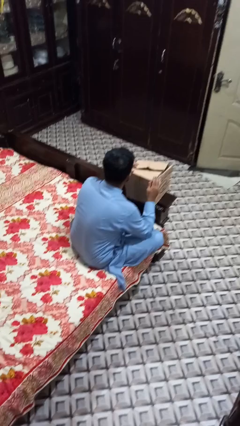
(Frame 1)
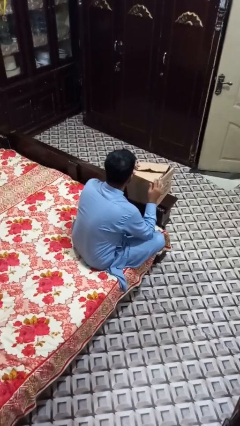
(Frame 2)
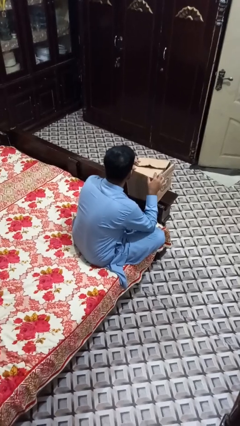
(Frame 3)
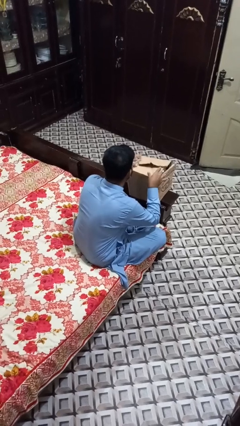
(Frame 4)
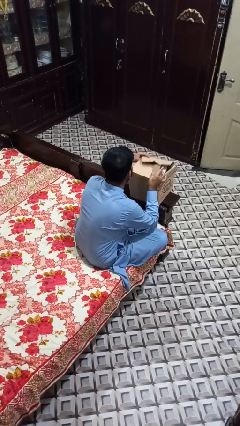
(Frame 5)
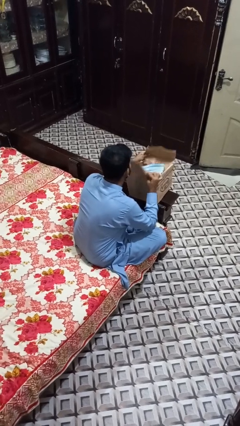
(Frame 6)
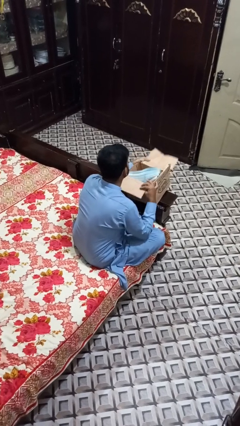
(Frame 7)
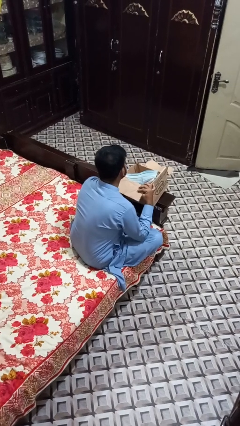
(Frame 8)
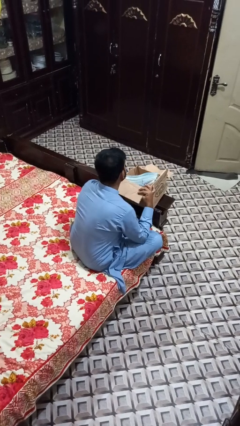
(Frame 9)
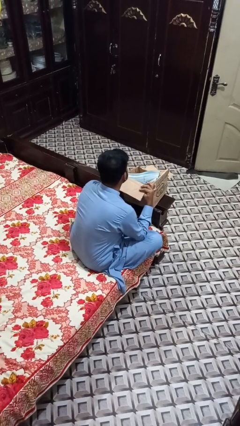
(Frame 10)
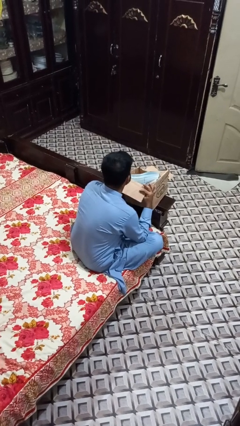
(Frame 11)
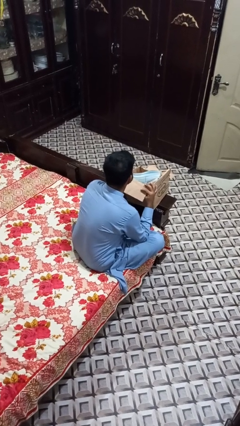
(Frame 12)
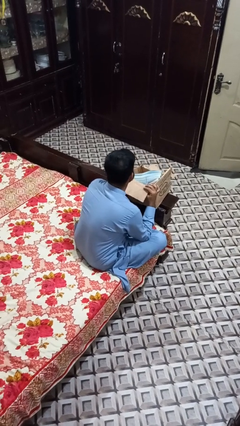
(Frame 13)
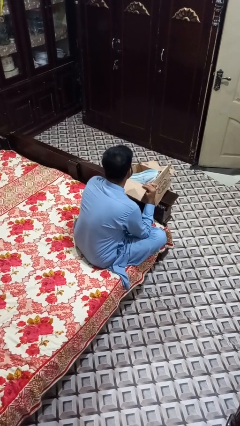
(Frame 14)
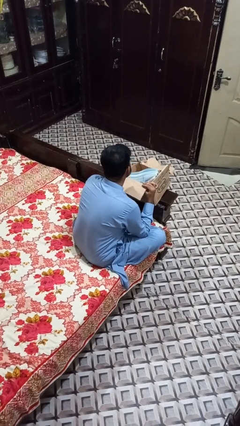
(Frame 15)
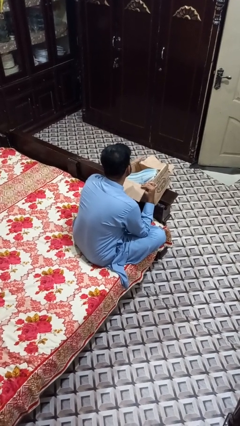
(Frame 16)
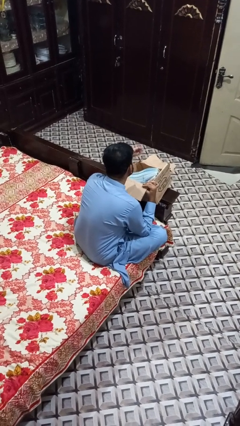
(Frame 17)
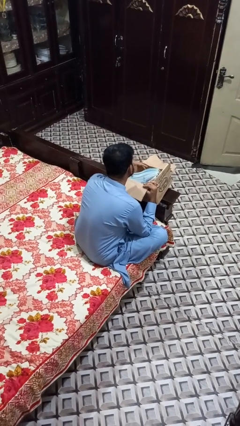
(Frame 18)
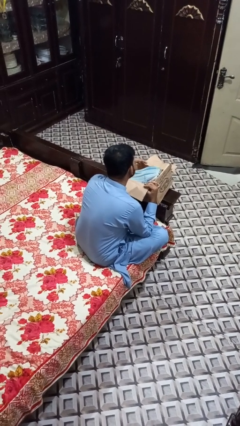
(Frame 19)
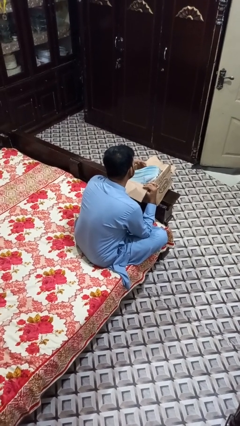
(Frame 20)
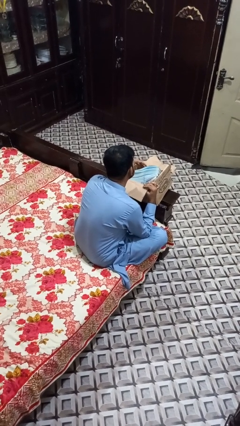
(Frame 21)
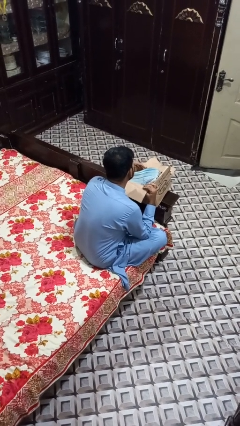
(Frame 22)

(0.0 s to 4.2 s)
person opens box

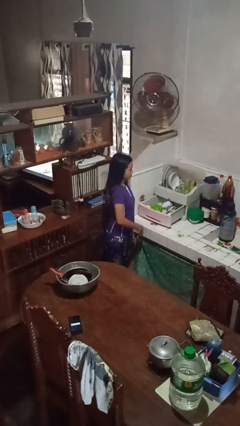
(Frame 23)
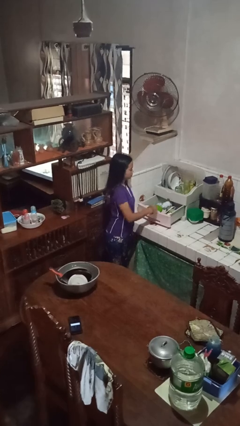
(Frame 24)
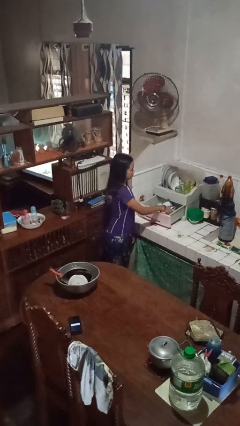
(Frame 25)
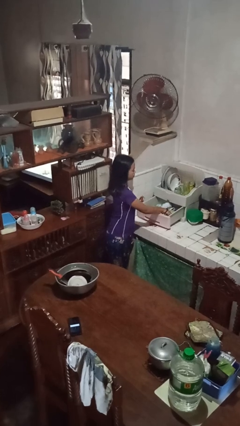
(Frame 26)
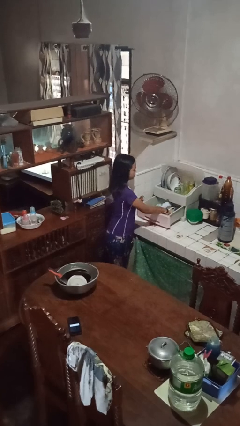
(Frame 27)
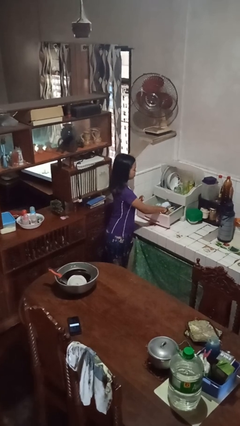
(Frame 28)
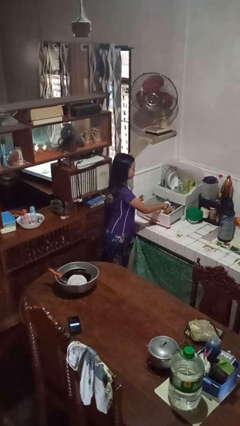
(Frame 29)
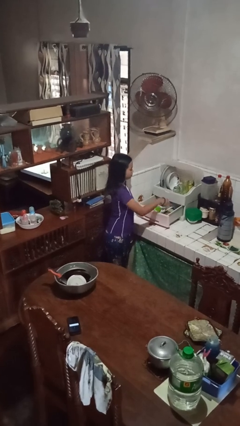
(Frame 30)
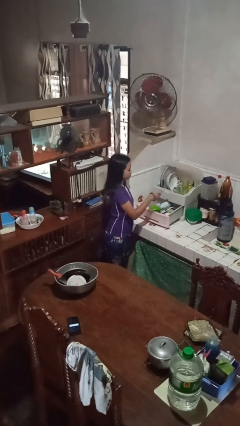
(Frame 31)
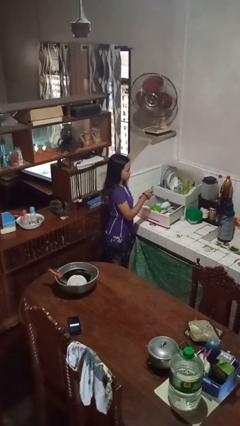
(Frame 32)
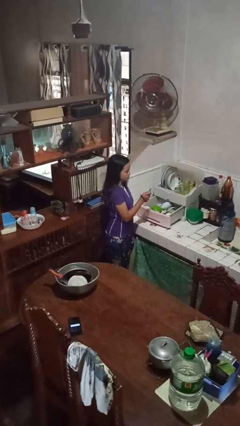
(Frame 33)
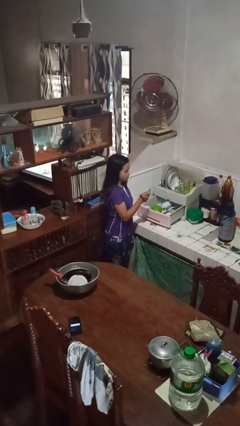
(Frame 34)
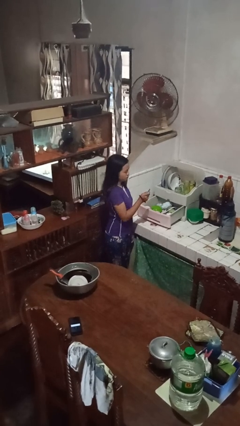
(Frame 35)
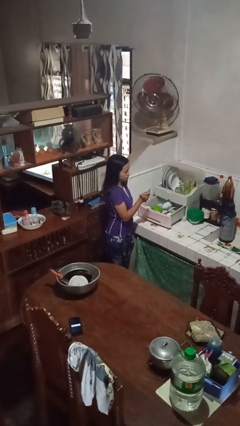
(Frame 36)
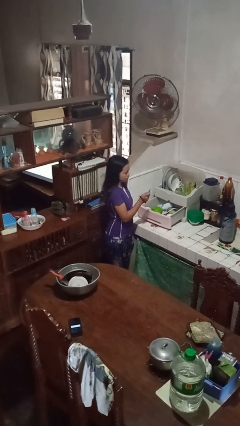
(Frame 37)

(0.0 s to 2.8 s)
person takes object from kitchen drawer

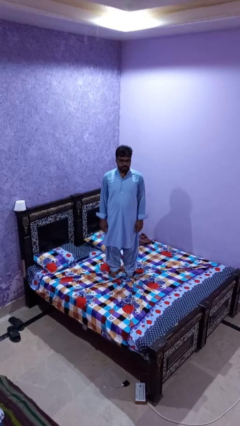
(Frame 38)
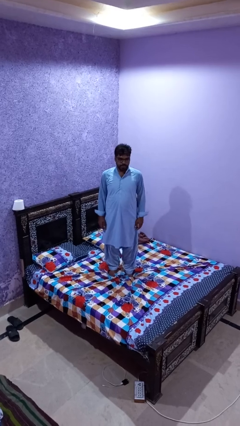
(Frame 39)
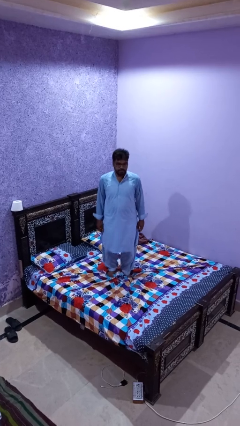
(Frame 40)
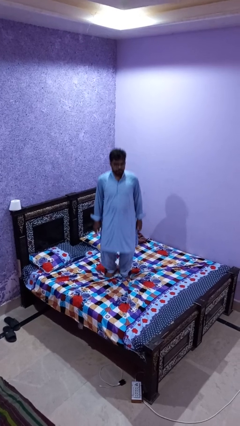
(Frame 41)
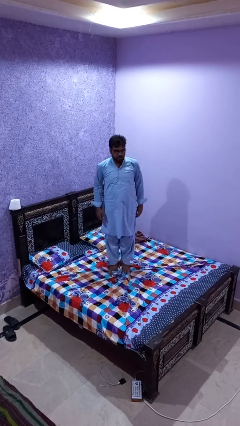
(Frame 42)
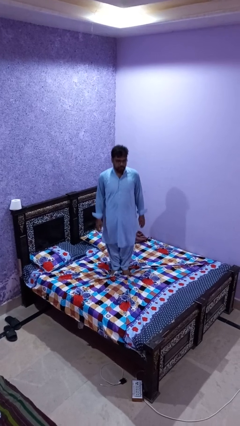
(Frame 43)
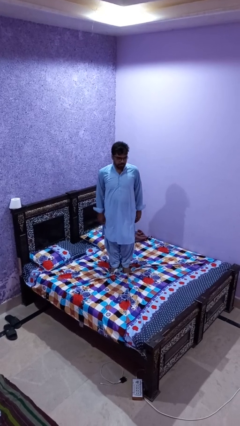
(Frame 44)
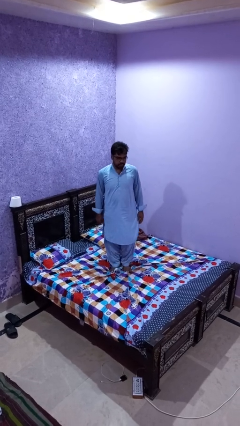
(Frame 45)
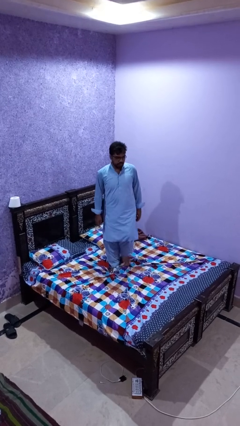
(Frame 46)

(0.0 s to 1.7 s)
person jumps on bed

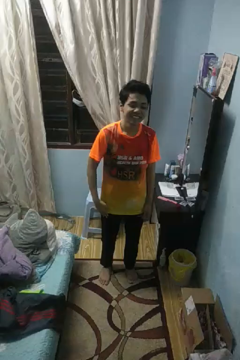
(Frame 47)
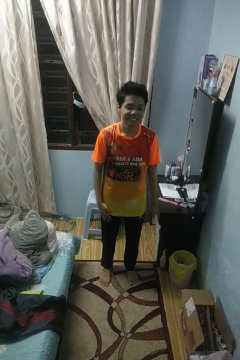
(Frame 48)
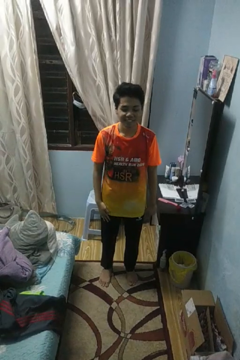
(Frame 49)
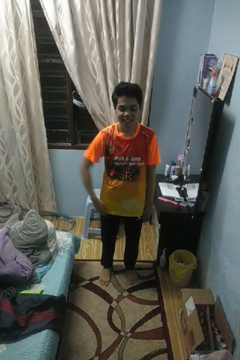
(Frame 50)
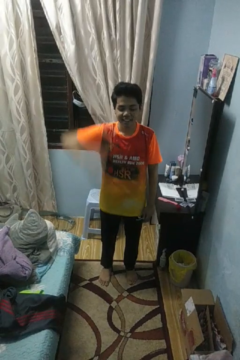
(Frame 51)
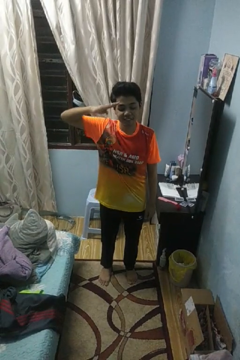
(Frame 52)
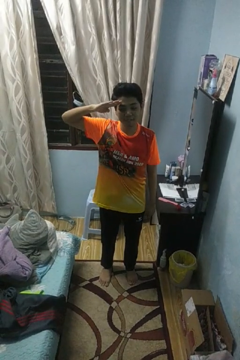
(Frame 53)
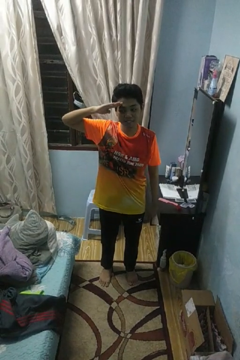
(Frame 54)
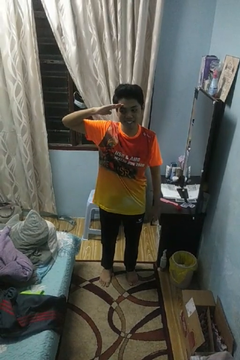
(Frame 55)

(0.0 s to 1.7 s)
person salutes

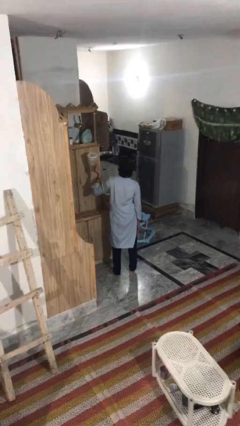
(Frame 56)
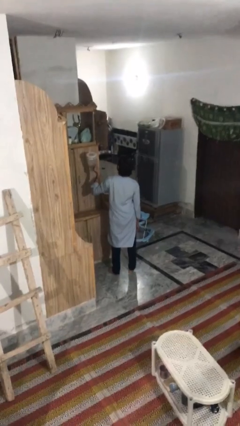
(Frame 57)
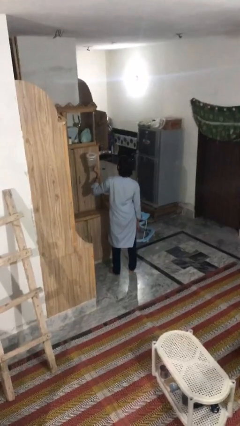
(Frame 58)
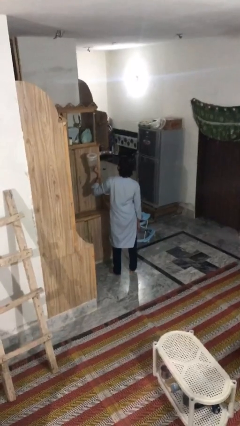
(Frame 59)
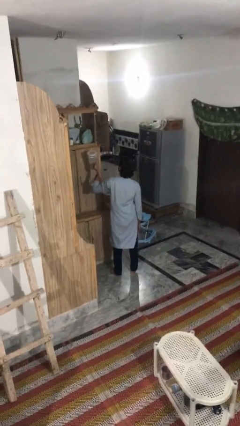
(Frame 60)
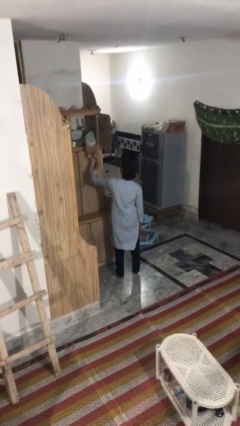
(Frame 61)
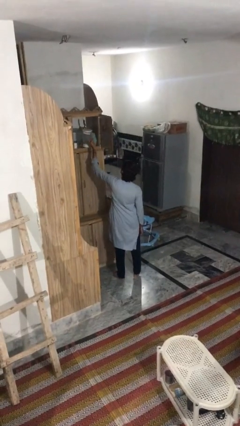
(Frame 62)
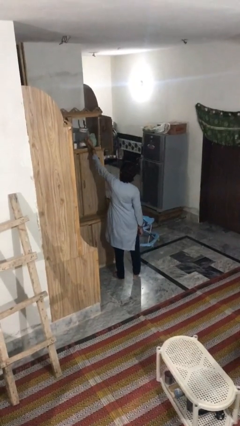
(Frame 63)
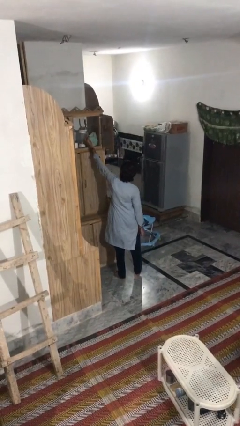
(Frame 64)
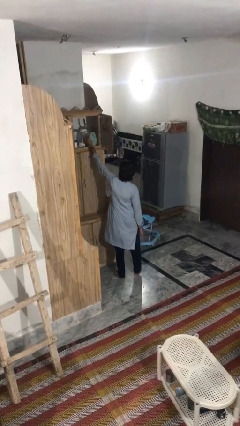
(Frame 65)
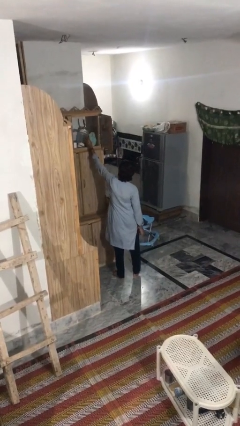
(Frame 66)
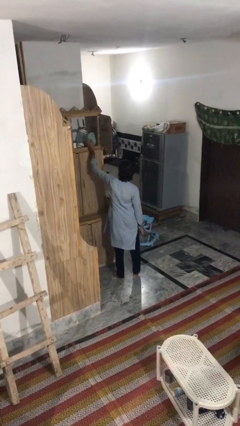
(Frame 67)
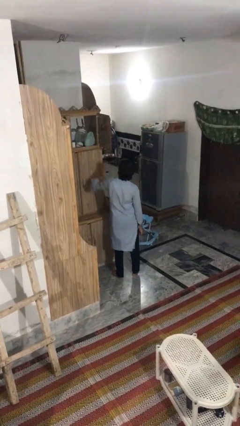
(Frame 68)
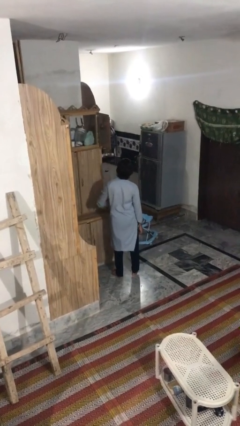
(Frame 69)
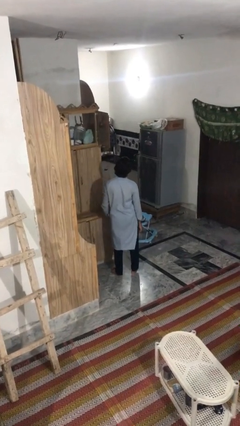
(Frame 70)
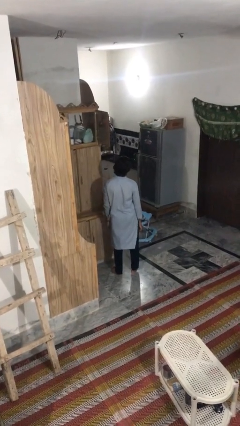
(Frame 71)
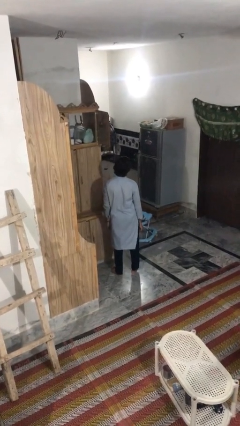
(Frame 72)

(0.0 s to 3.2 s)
person puts down object on shelf

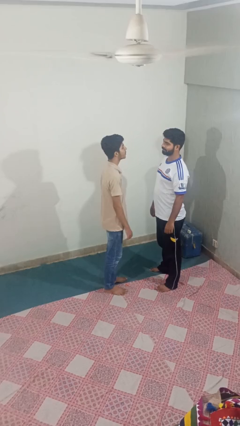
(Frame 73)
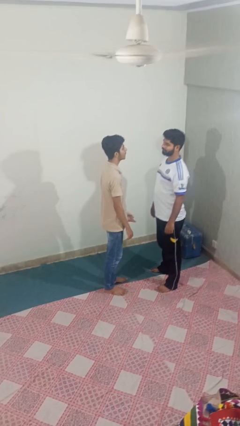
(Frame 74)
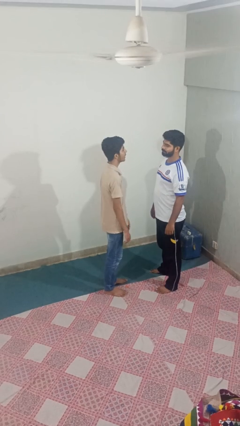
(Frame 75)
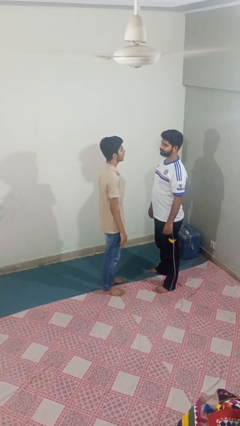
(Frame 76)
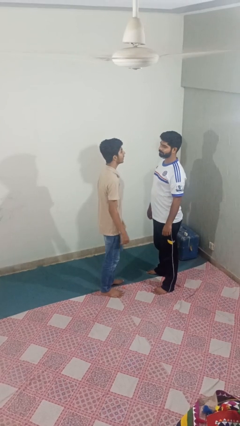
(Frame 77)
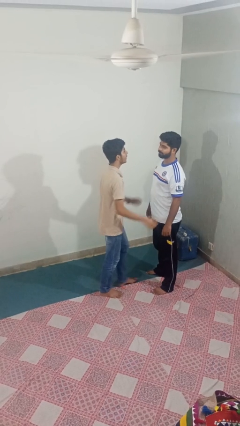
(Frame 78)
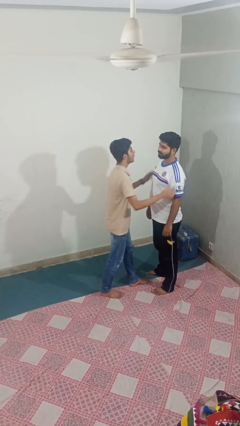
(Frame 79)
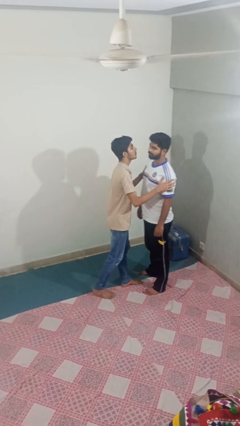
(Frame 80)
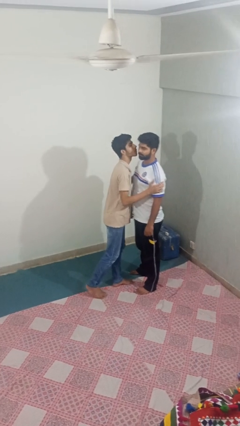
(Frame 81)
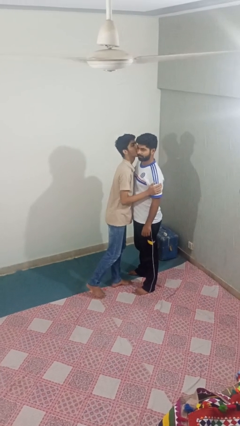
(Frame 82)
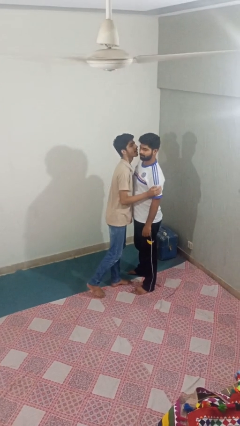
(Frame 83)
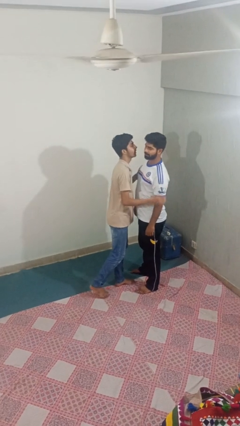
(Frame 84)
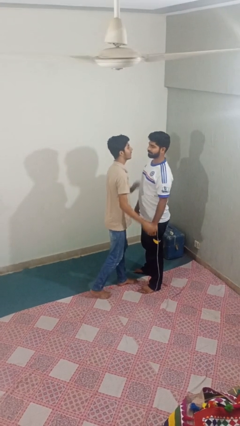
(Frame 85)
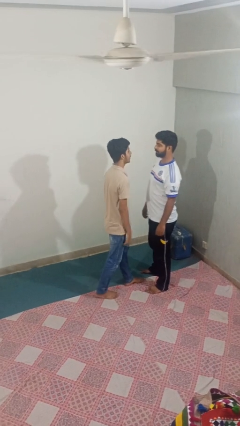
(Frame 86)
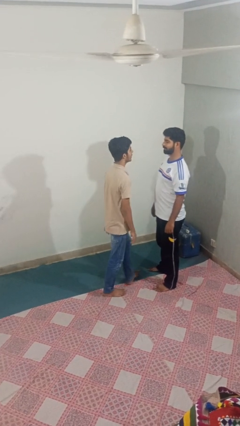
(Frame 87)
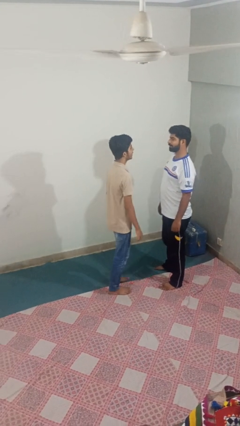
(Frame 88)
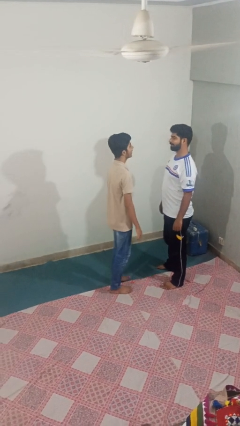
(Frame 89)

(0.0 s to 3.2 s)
person kisses cheek of person

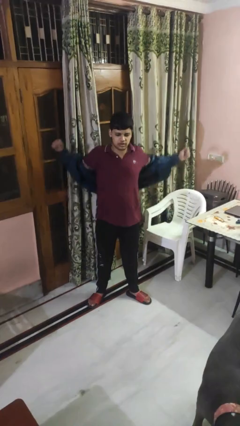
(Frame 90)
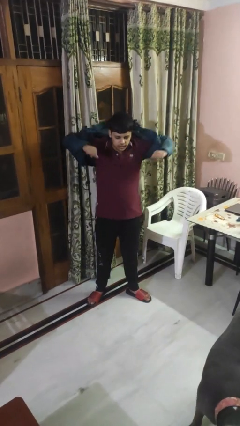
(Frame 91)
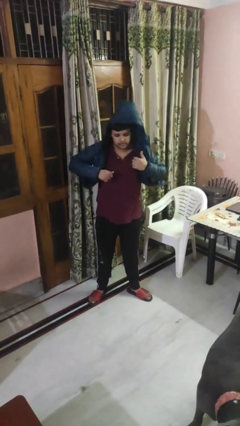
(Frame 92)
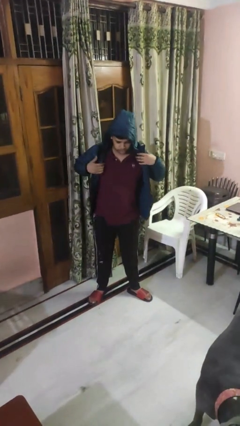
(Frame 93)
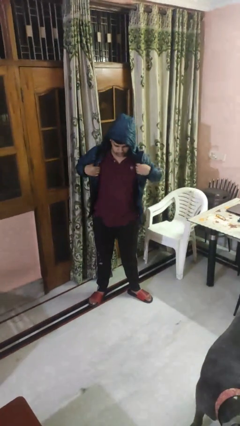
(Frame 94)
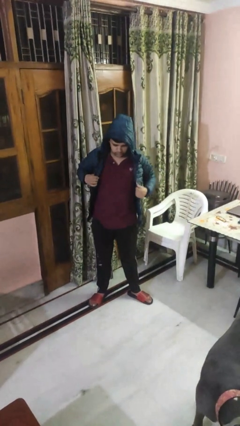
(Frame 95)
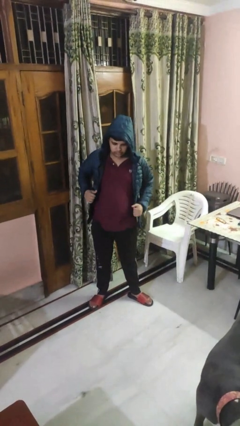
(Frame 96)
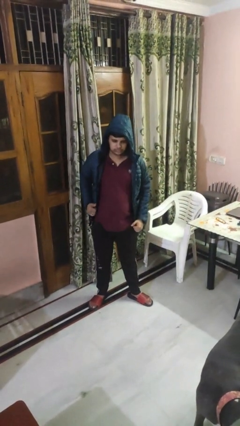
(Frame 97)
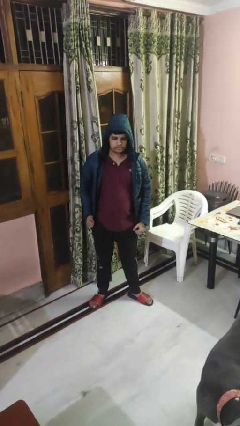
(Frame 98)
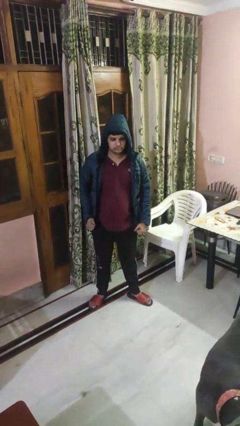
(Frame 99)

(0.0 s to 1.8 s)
person puts on hoodie
